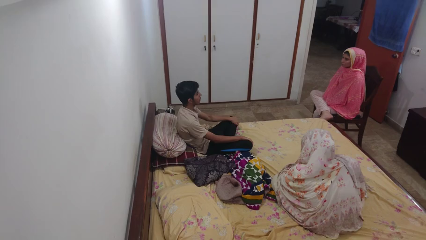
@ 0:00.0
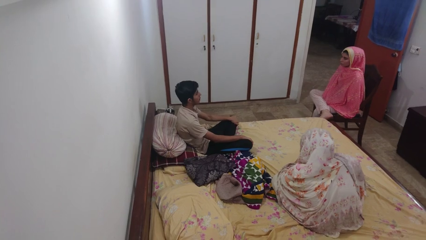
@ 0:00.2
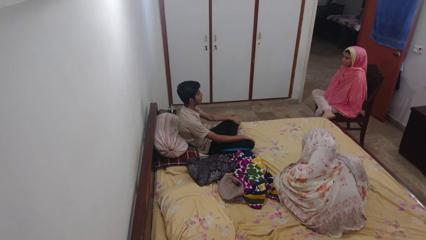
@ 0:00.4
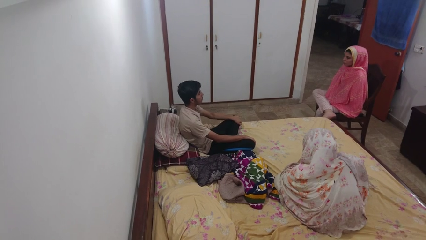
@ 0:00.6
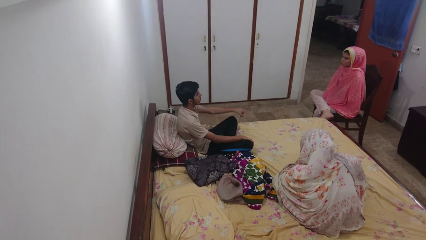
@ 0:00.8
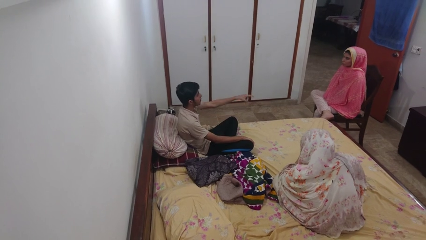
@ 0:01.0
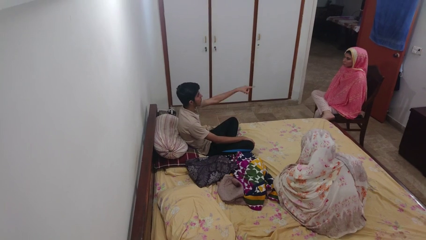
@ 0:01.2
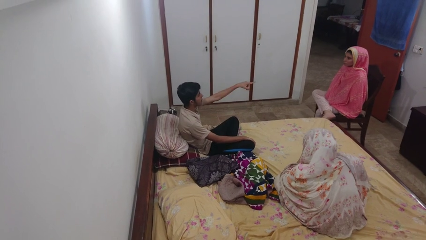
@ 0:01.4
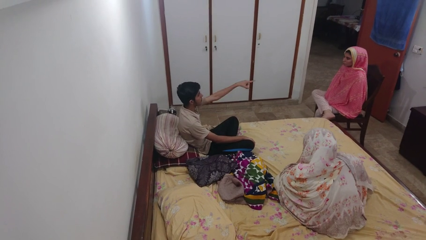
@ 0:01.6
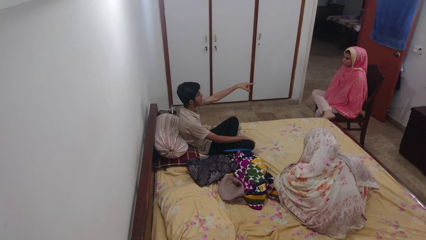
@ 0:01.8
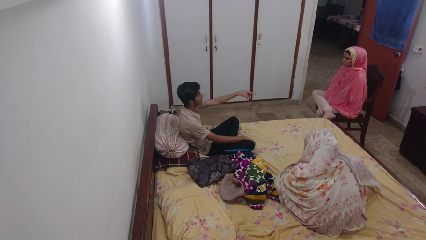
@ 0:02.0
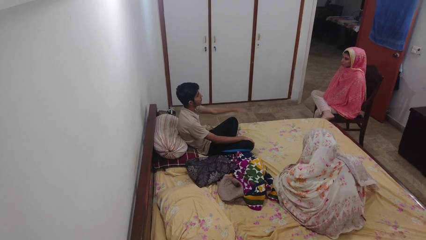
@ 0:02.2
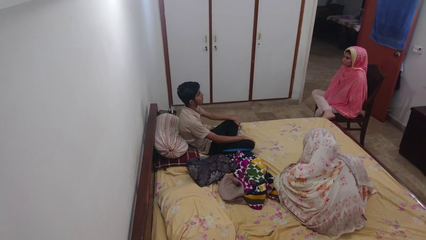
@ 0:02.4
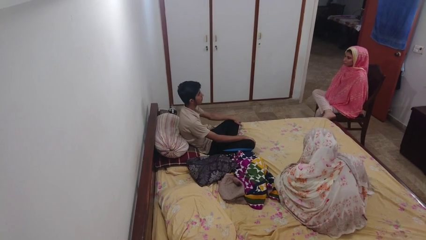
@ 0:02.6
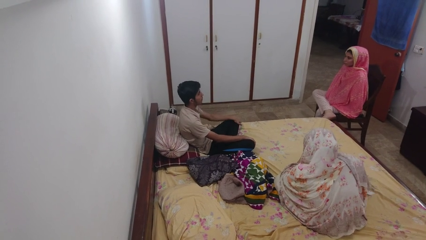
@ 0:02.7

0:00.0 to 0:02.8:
person points at person

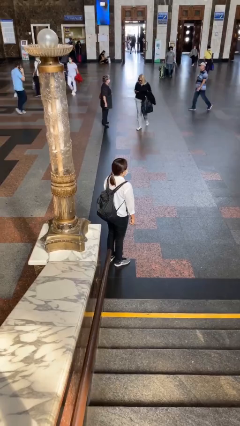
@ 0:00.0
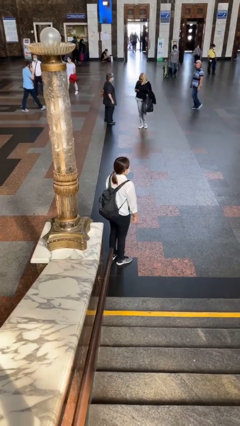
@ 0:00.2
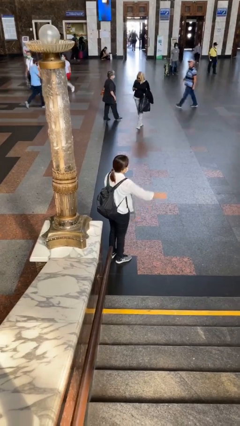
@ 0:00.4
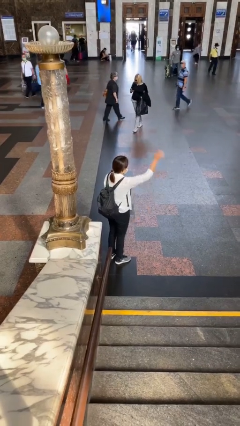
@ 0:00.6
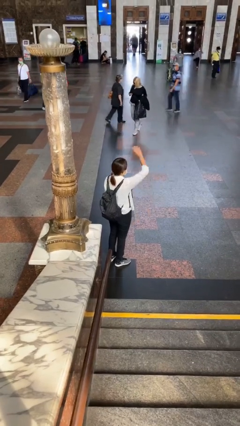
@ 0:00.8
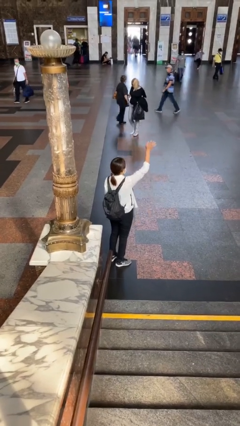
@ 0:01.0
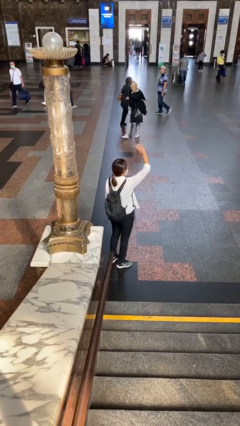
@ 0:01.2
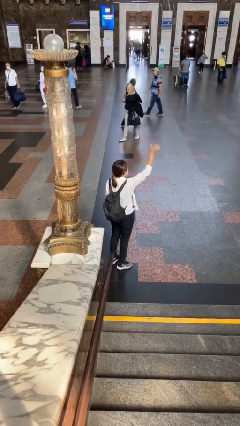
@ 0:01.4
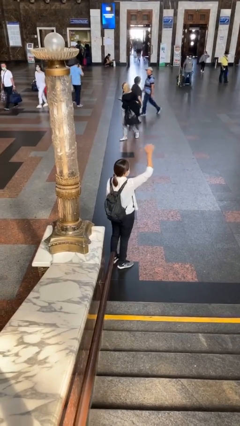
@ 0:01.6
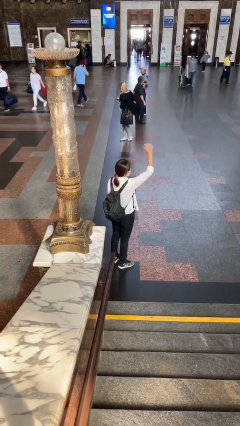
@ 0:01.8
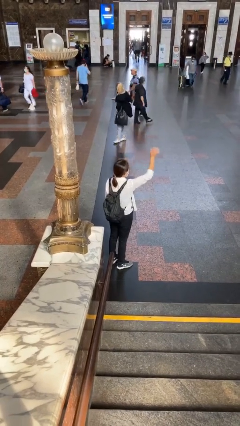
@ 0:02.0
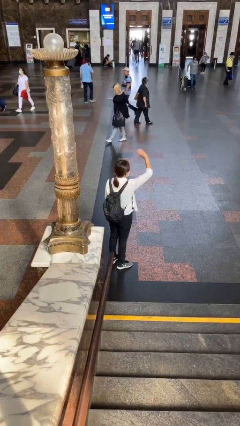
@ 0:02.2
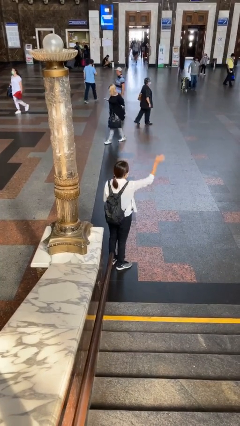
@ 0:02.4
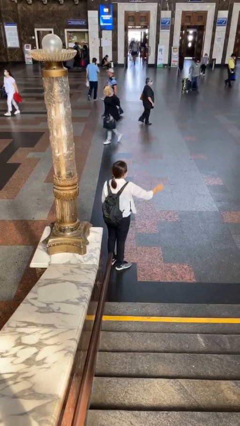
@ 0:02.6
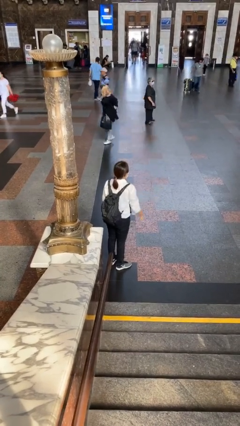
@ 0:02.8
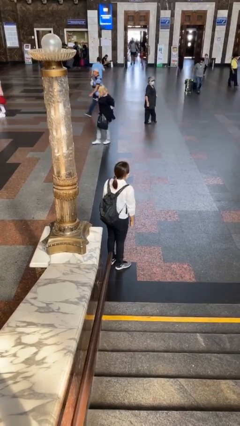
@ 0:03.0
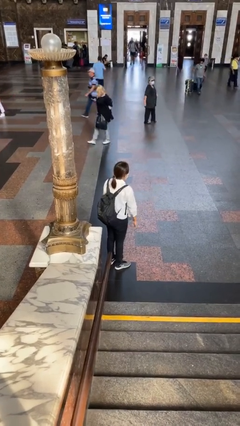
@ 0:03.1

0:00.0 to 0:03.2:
person waves at person

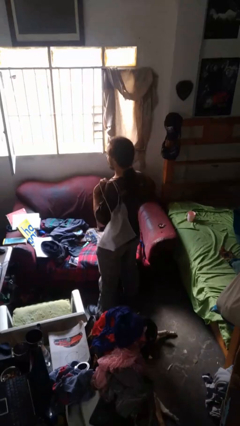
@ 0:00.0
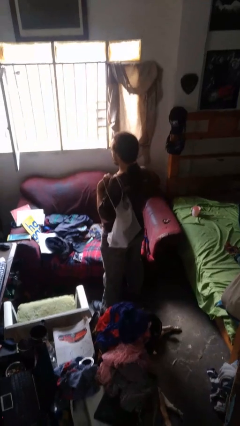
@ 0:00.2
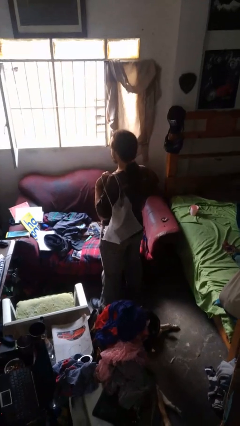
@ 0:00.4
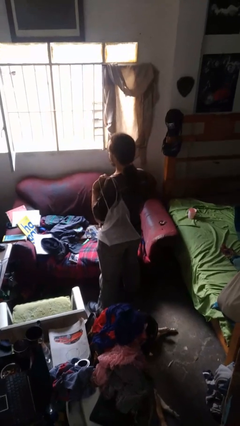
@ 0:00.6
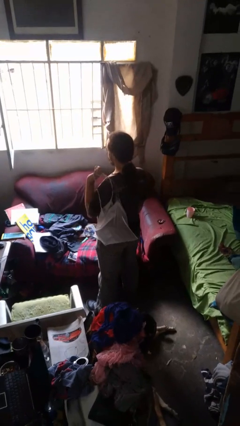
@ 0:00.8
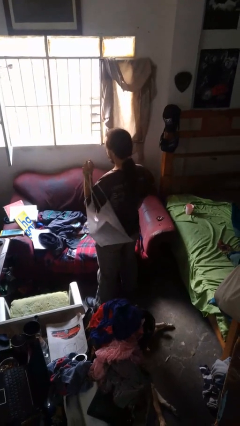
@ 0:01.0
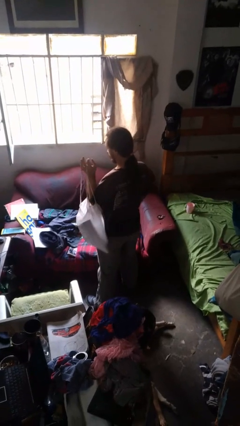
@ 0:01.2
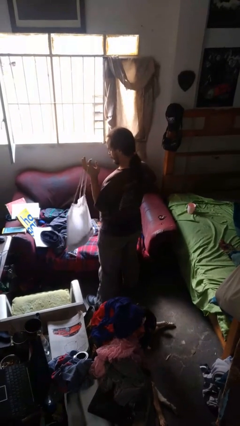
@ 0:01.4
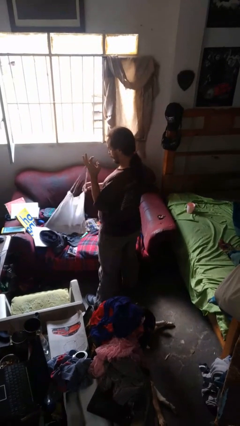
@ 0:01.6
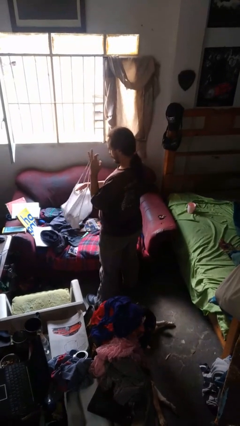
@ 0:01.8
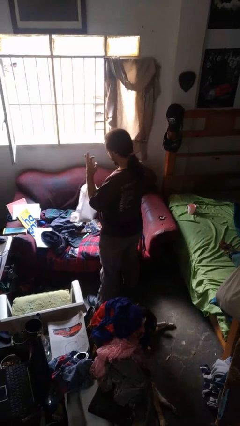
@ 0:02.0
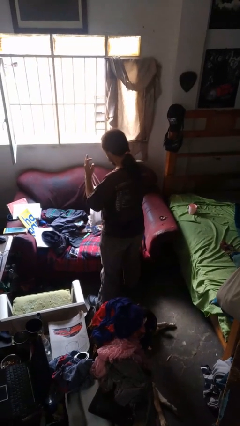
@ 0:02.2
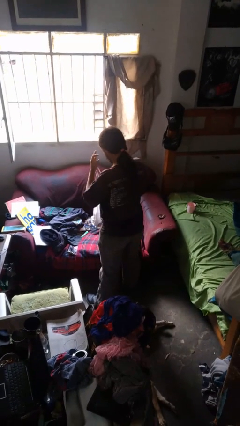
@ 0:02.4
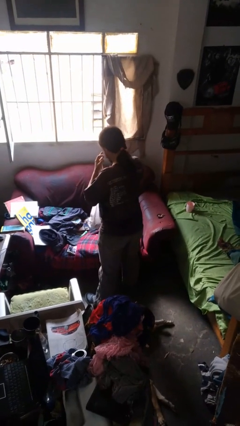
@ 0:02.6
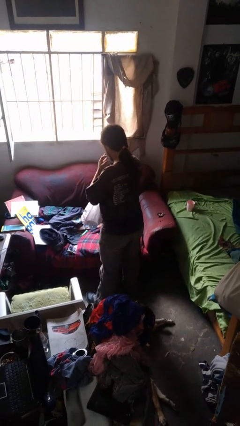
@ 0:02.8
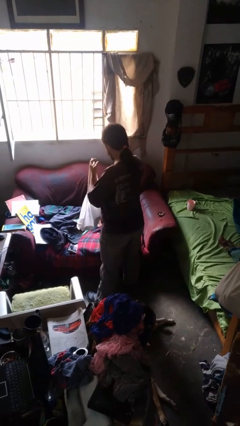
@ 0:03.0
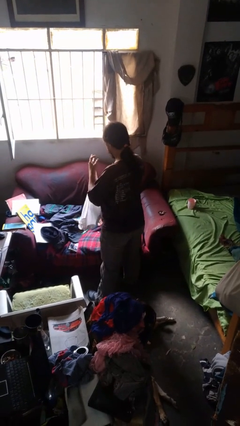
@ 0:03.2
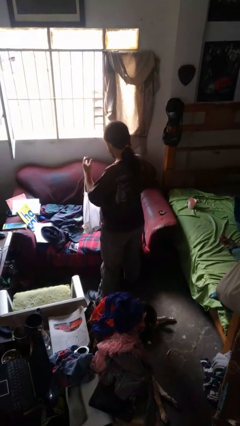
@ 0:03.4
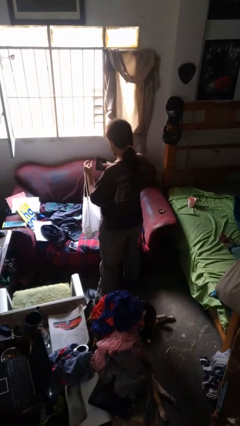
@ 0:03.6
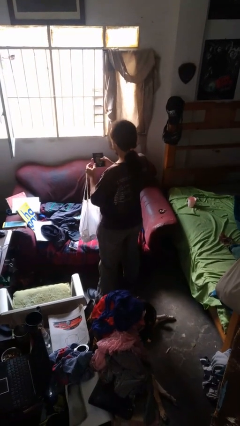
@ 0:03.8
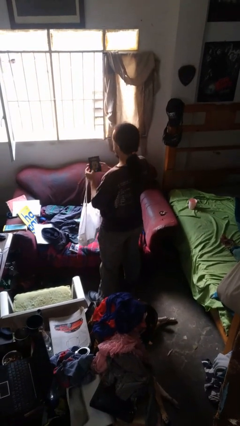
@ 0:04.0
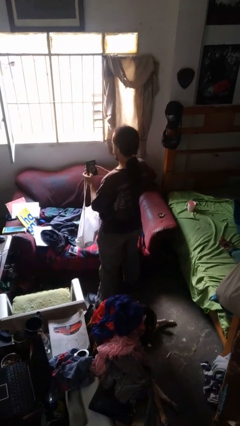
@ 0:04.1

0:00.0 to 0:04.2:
person takes object from bag

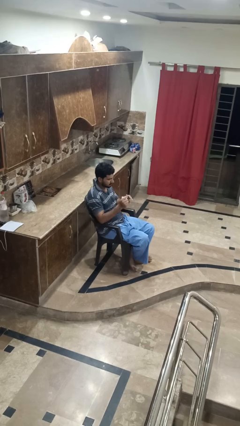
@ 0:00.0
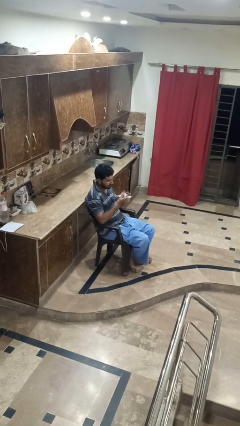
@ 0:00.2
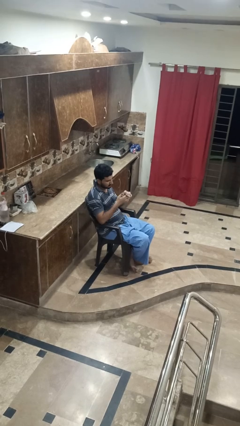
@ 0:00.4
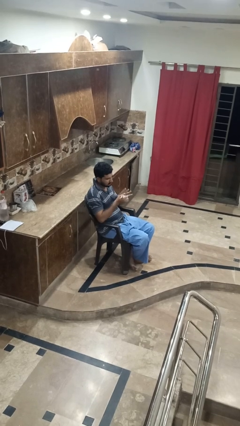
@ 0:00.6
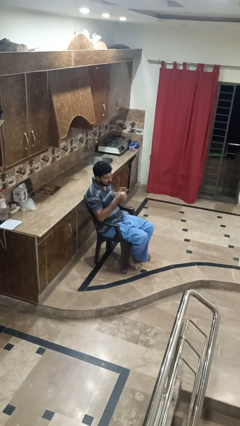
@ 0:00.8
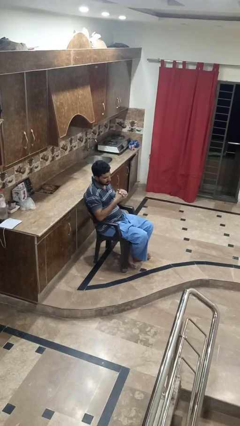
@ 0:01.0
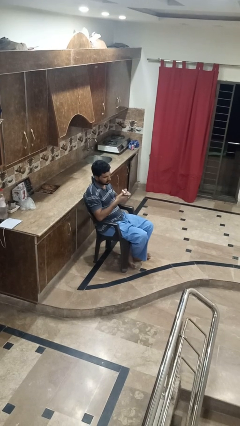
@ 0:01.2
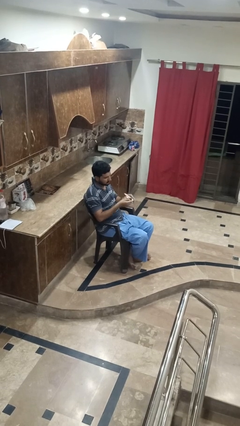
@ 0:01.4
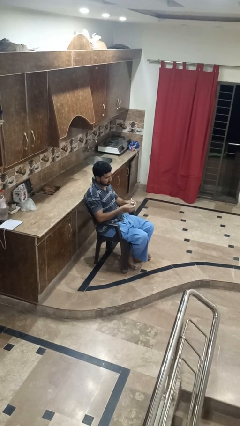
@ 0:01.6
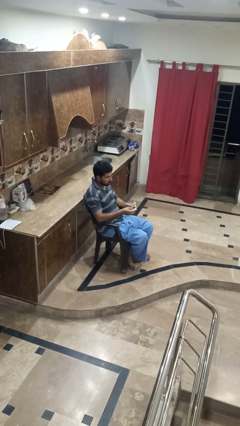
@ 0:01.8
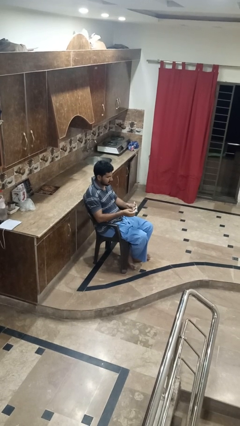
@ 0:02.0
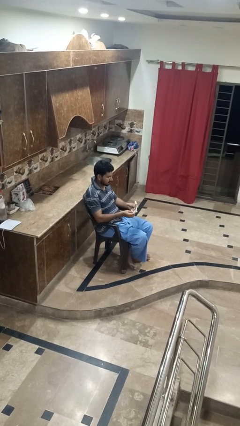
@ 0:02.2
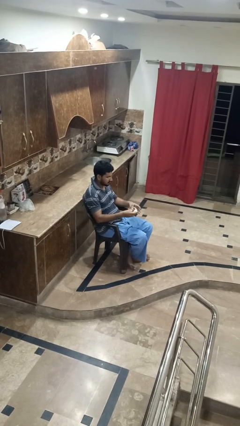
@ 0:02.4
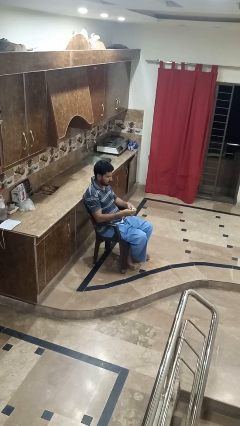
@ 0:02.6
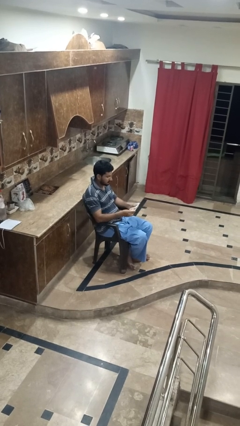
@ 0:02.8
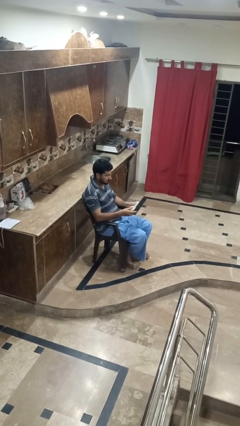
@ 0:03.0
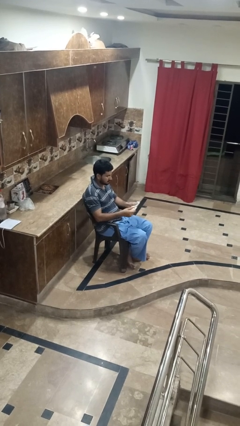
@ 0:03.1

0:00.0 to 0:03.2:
person crumples paper

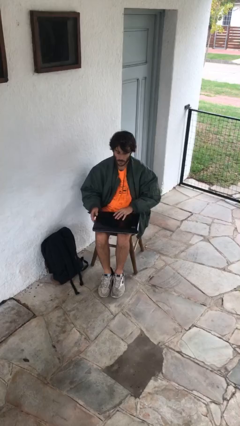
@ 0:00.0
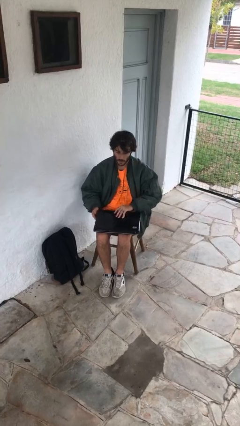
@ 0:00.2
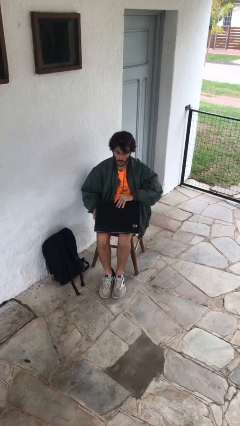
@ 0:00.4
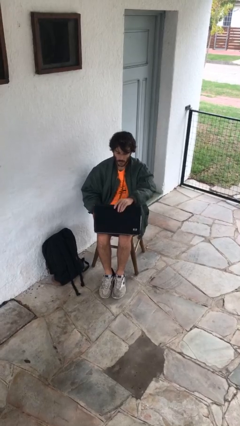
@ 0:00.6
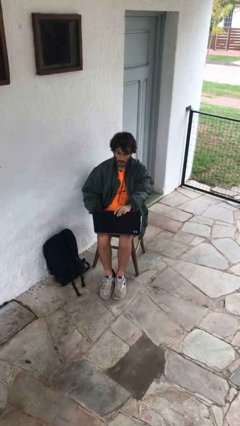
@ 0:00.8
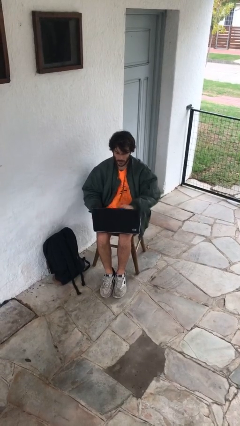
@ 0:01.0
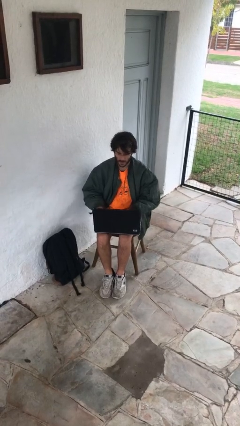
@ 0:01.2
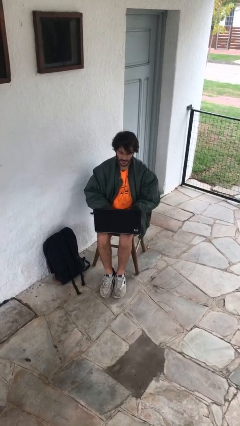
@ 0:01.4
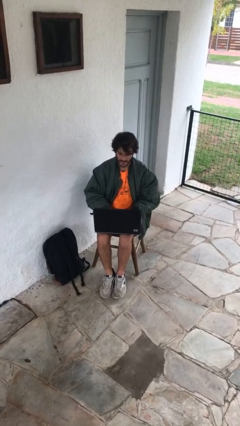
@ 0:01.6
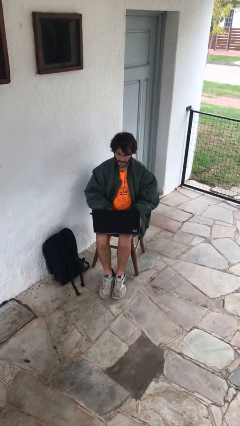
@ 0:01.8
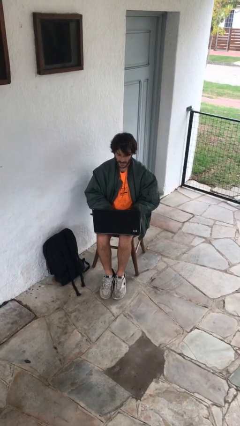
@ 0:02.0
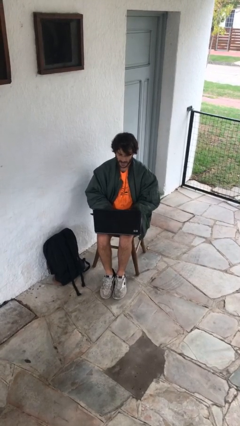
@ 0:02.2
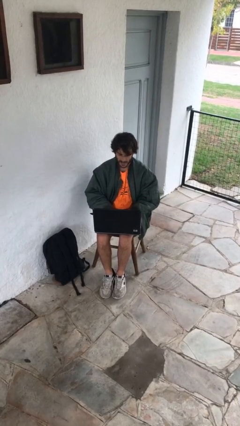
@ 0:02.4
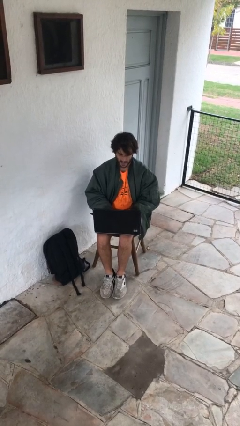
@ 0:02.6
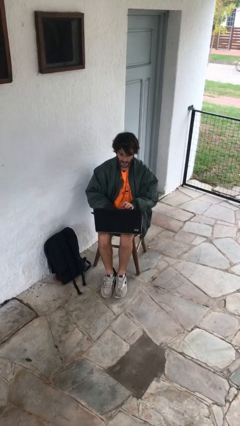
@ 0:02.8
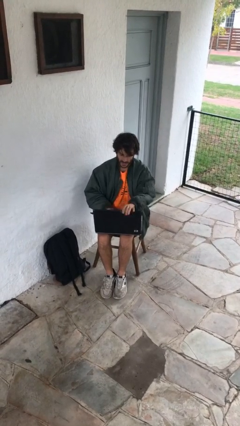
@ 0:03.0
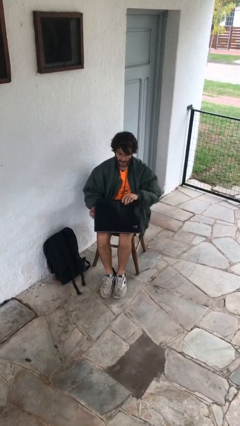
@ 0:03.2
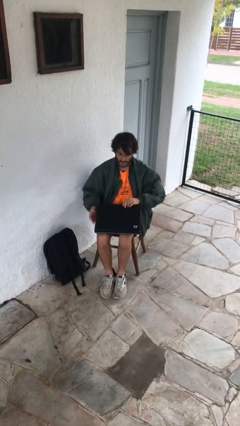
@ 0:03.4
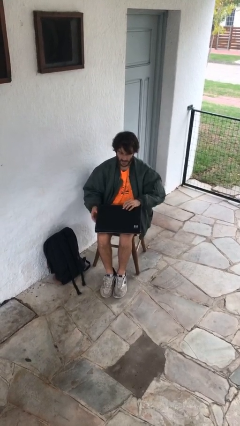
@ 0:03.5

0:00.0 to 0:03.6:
person interacts with laptop
